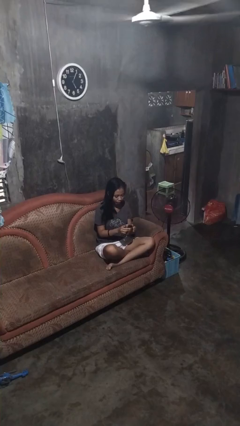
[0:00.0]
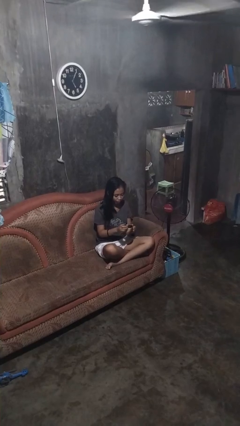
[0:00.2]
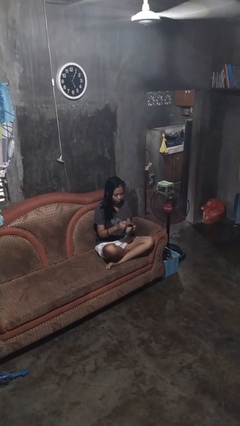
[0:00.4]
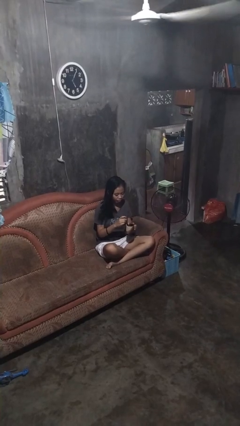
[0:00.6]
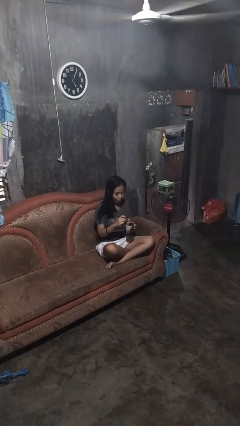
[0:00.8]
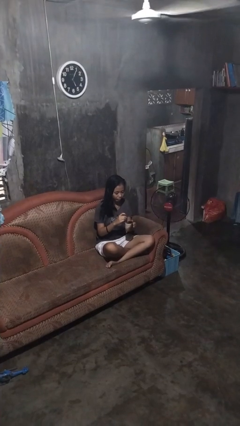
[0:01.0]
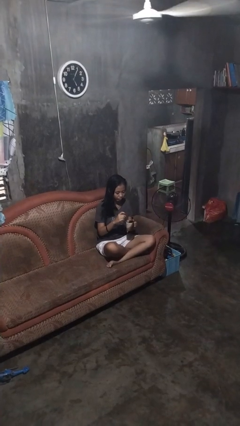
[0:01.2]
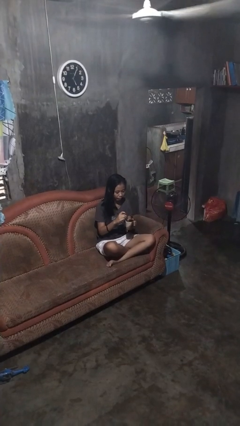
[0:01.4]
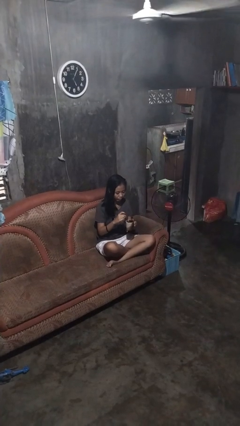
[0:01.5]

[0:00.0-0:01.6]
person stirs mug

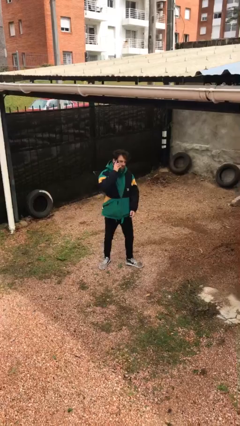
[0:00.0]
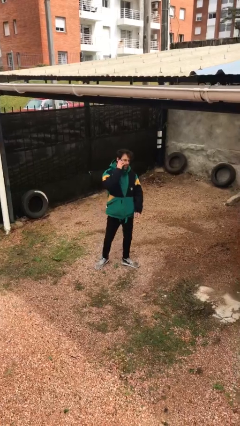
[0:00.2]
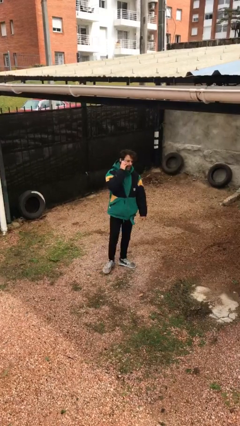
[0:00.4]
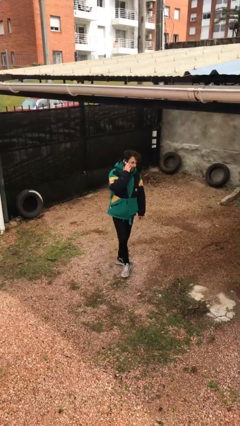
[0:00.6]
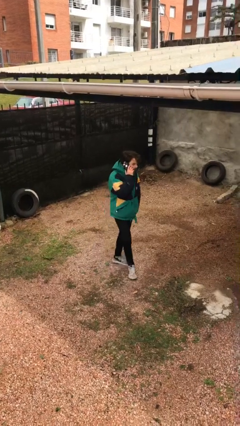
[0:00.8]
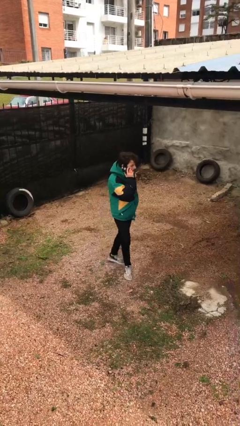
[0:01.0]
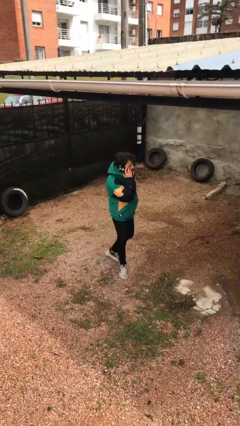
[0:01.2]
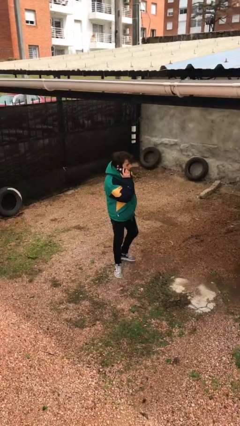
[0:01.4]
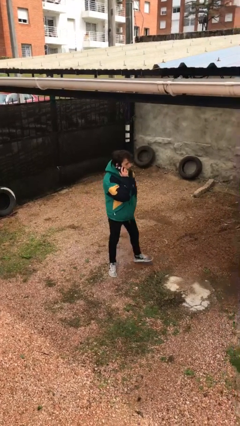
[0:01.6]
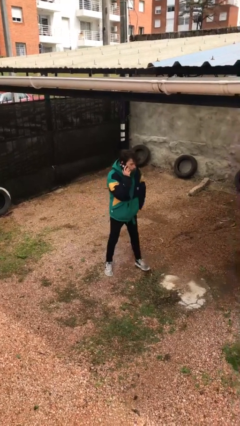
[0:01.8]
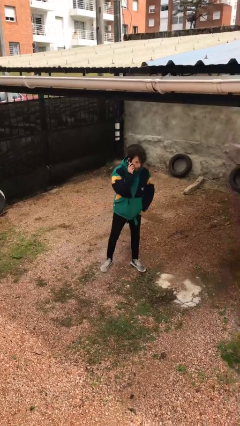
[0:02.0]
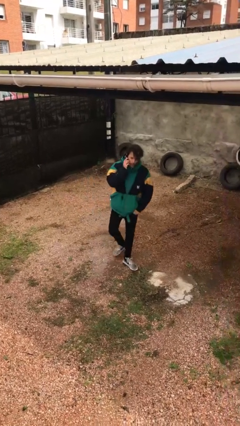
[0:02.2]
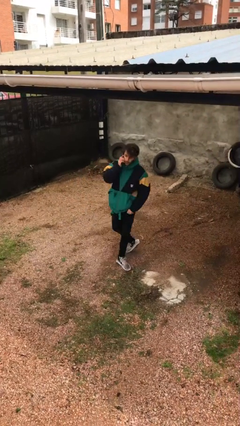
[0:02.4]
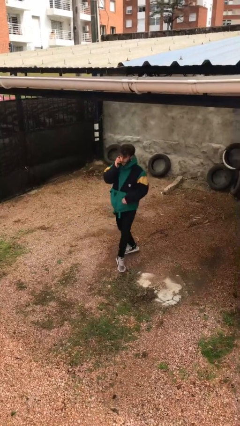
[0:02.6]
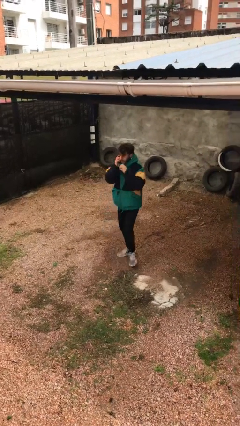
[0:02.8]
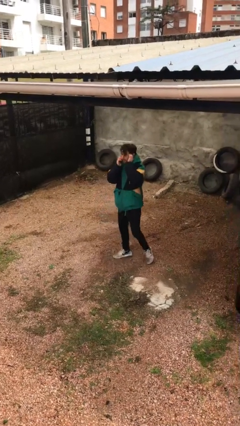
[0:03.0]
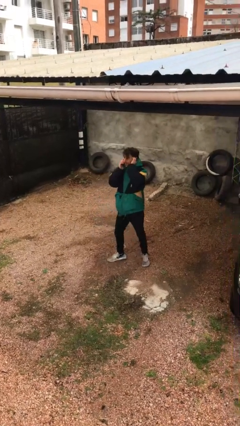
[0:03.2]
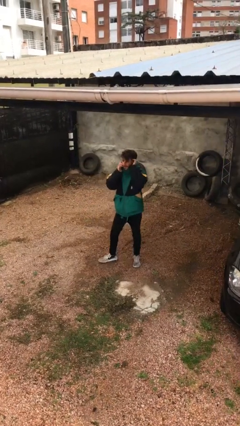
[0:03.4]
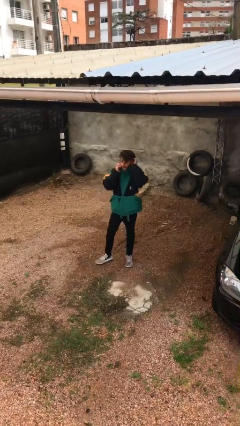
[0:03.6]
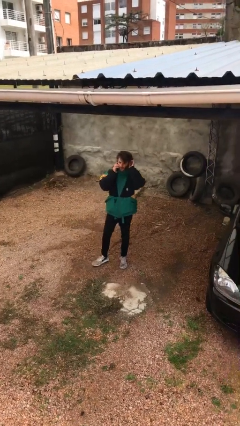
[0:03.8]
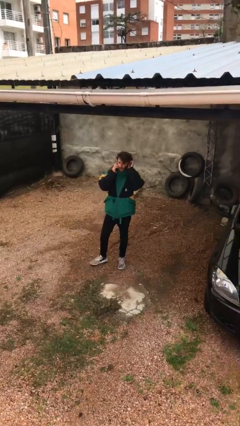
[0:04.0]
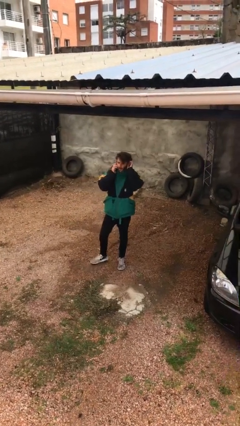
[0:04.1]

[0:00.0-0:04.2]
person talks on phone

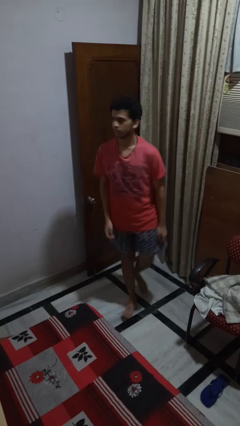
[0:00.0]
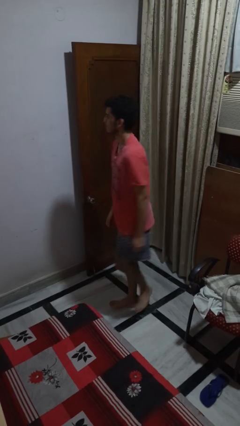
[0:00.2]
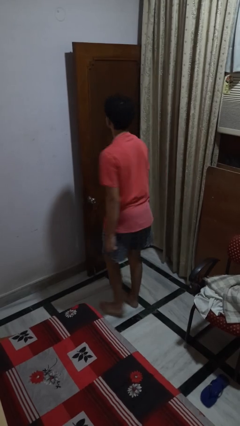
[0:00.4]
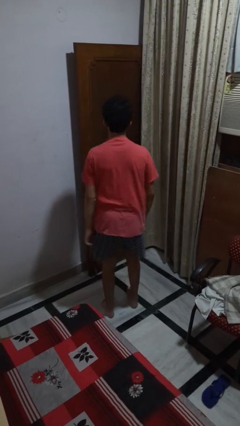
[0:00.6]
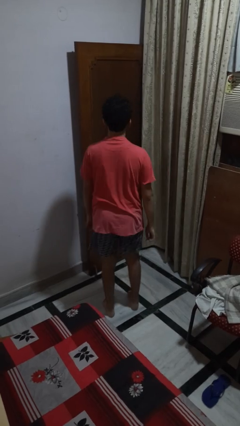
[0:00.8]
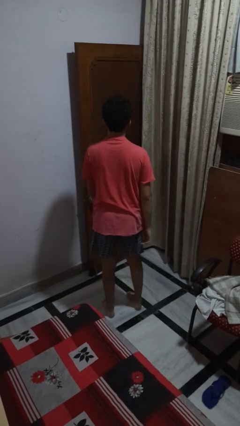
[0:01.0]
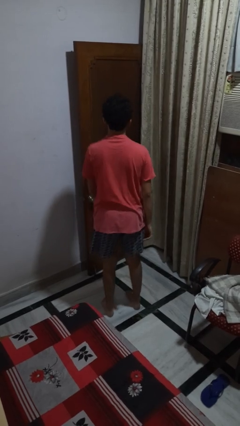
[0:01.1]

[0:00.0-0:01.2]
person twirls

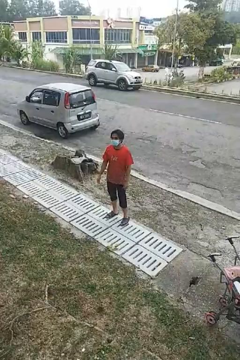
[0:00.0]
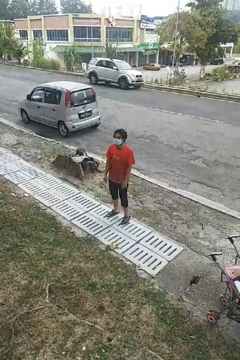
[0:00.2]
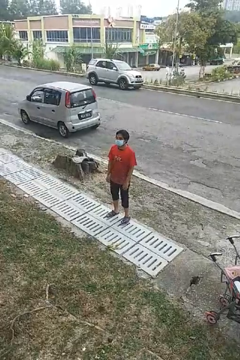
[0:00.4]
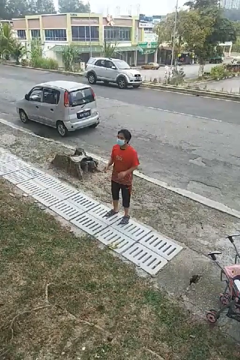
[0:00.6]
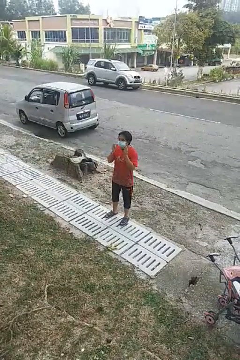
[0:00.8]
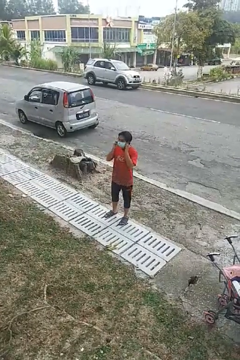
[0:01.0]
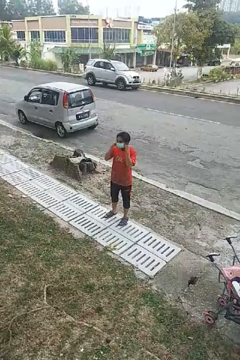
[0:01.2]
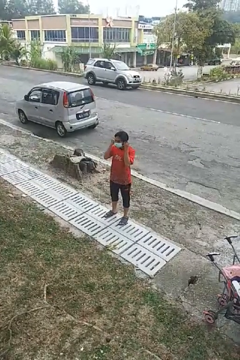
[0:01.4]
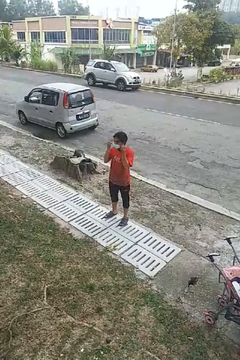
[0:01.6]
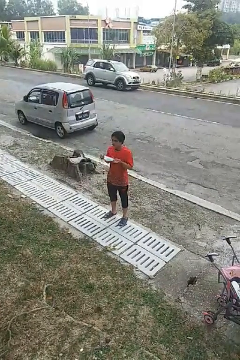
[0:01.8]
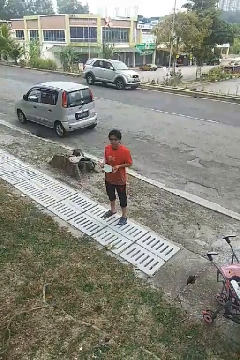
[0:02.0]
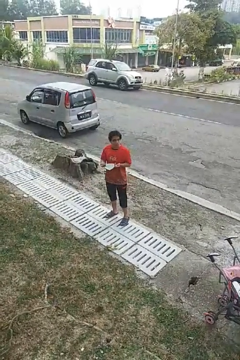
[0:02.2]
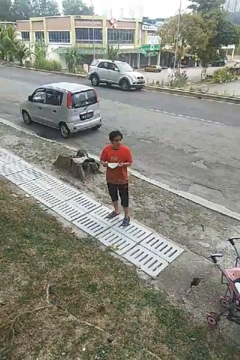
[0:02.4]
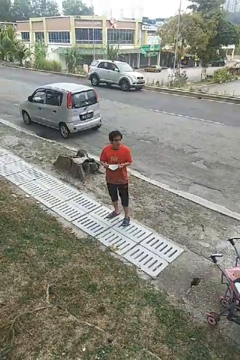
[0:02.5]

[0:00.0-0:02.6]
person takes off facemask

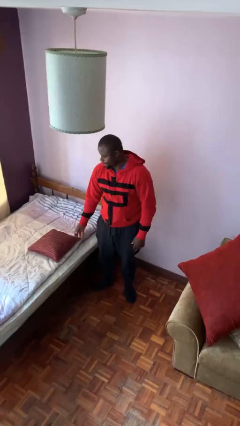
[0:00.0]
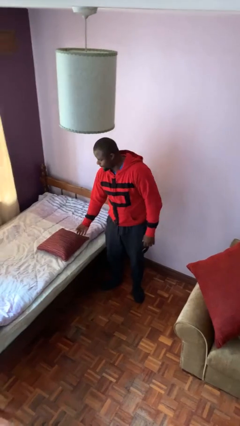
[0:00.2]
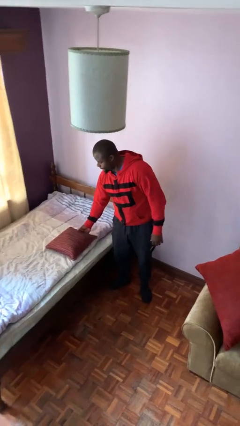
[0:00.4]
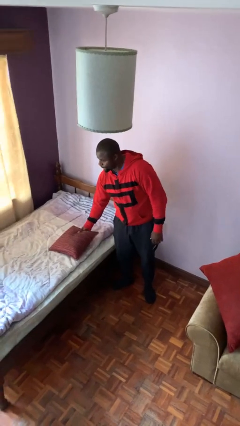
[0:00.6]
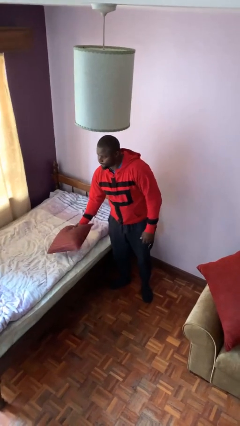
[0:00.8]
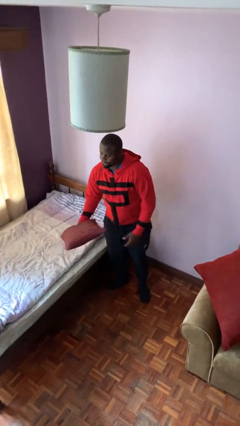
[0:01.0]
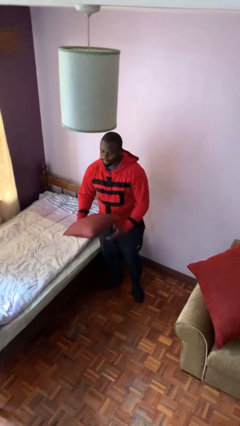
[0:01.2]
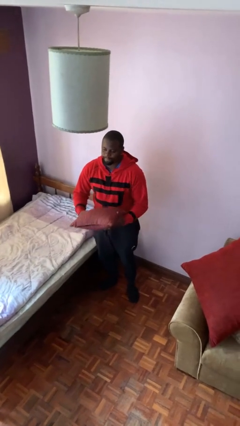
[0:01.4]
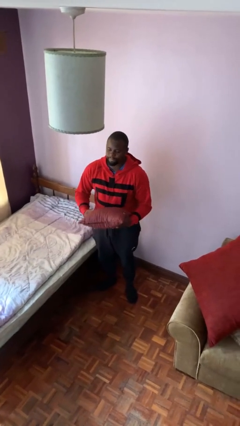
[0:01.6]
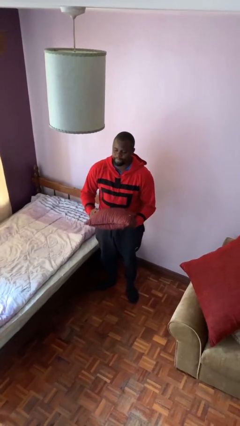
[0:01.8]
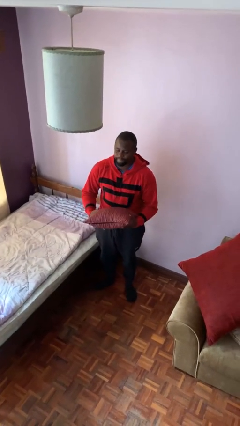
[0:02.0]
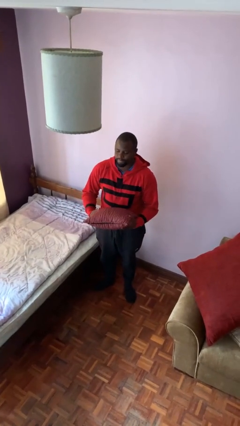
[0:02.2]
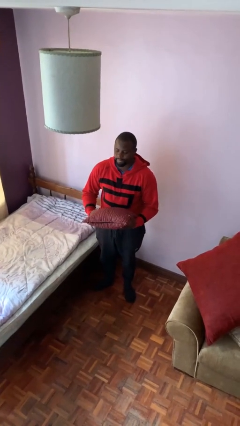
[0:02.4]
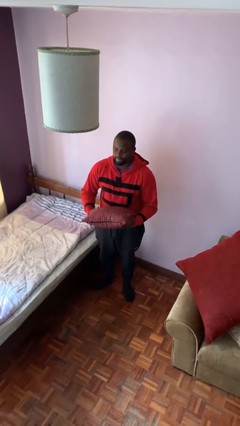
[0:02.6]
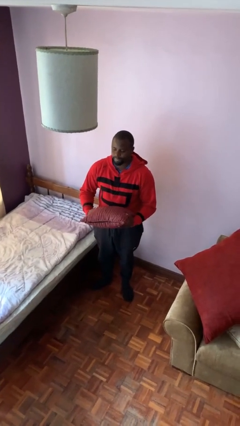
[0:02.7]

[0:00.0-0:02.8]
person picks up object from bed

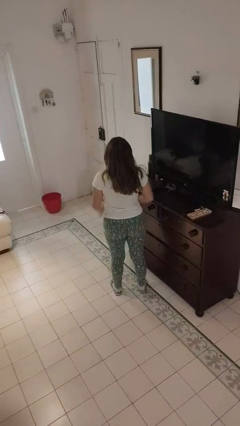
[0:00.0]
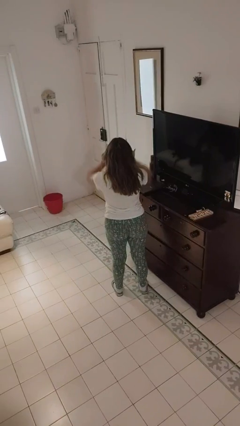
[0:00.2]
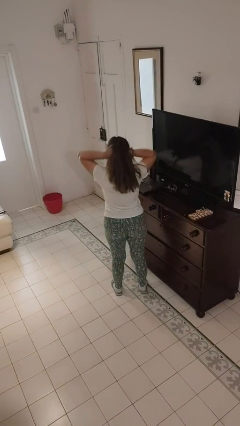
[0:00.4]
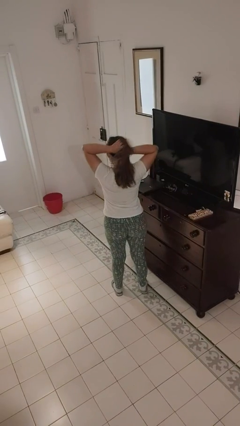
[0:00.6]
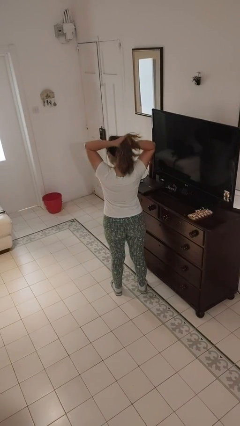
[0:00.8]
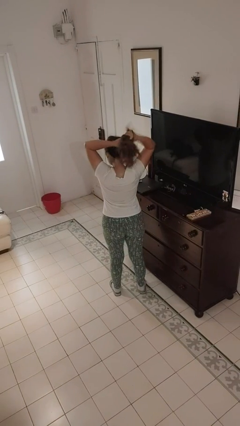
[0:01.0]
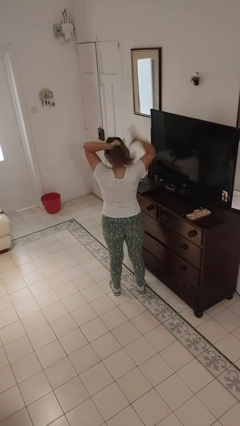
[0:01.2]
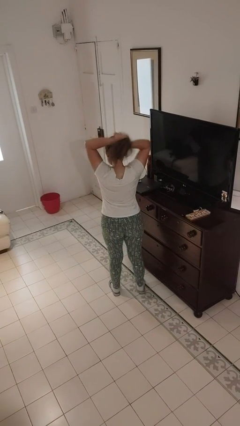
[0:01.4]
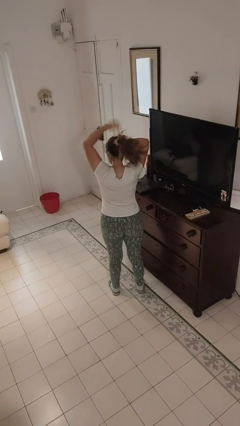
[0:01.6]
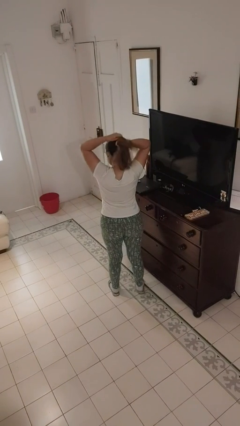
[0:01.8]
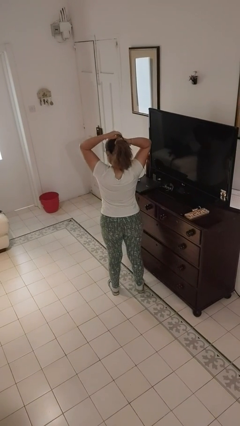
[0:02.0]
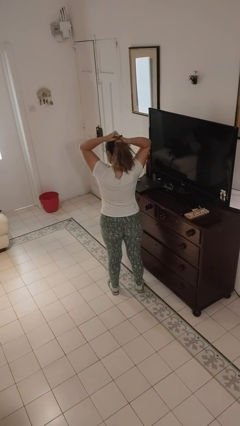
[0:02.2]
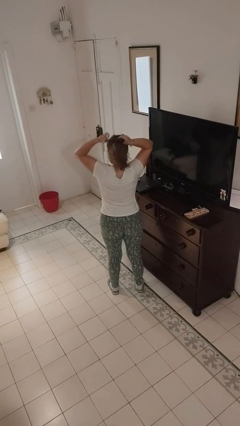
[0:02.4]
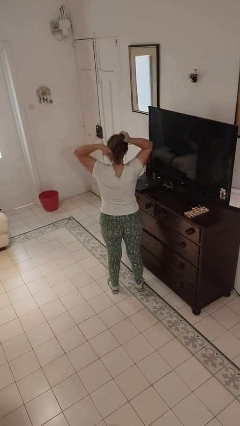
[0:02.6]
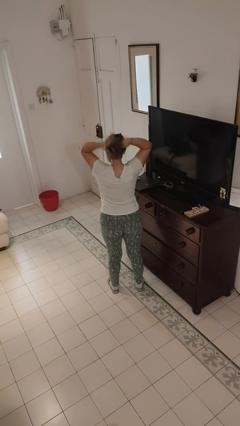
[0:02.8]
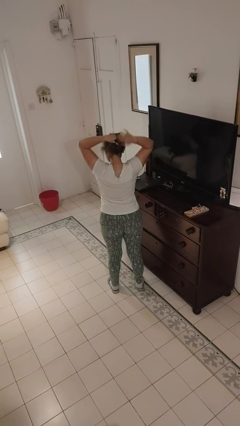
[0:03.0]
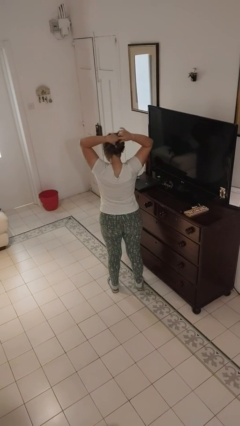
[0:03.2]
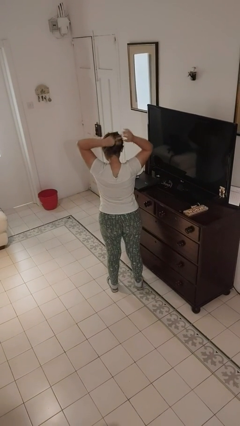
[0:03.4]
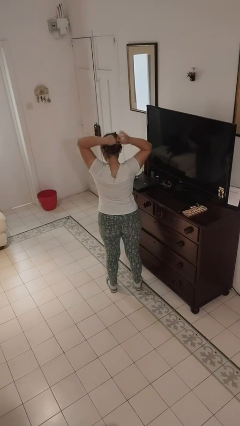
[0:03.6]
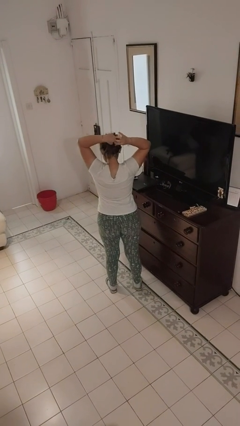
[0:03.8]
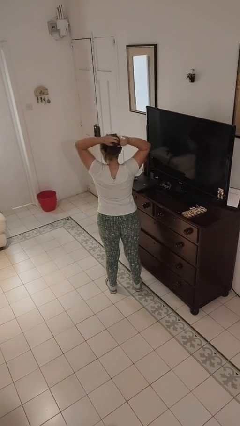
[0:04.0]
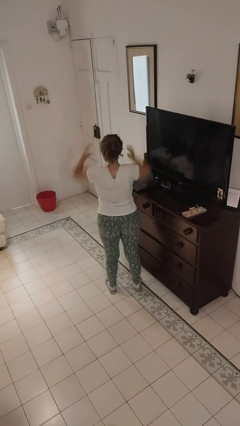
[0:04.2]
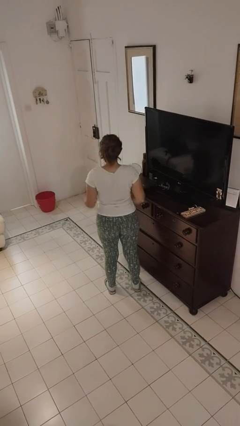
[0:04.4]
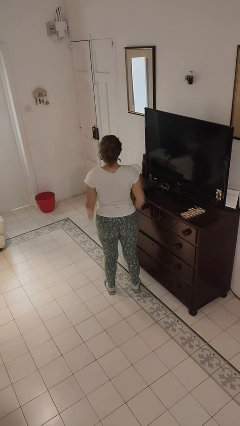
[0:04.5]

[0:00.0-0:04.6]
person puts hair in ponytail

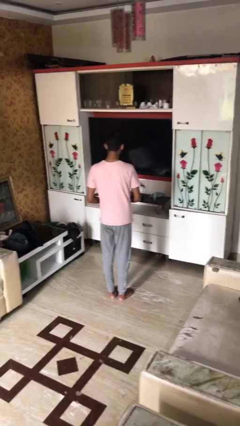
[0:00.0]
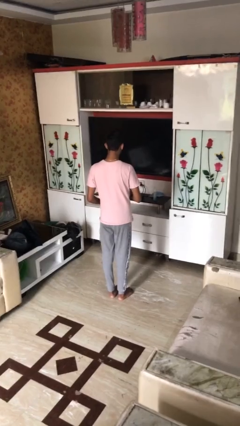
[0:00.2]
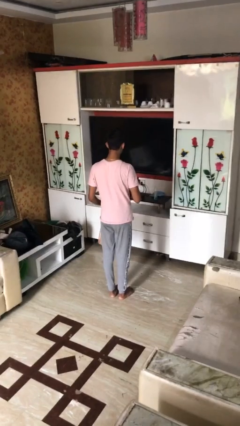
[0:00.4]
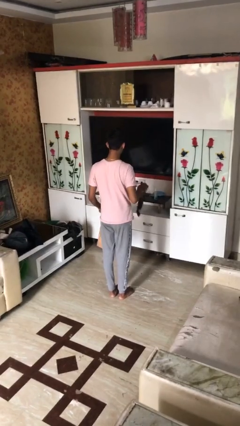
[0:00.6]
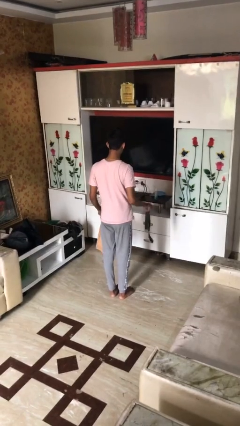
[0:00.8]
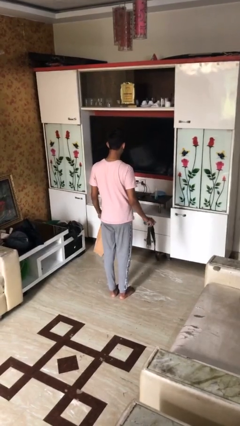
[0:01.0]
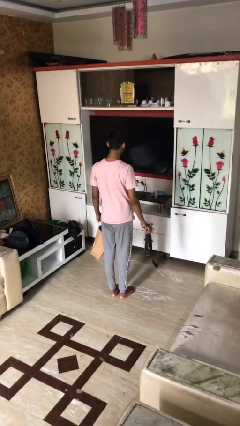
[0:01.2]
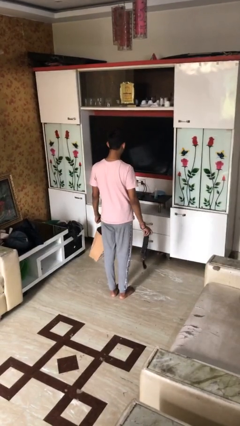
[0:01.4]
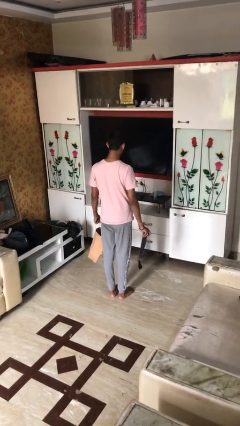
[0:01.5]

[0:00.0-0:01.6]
person takes object from bag
